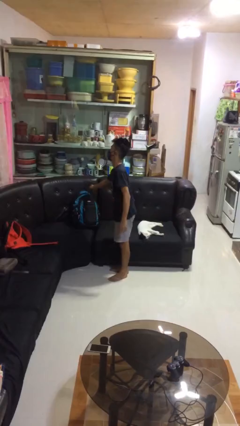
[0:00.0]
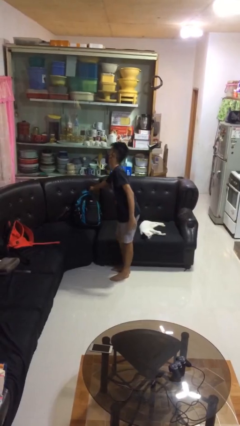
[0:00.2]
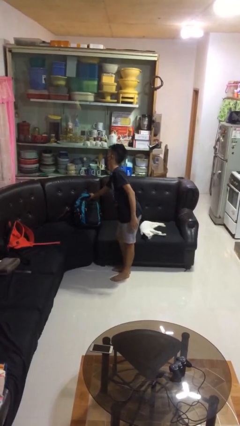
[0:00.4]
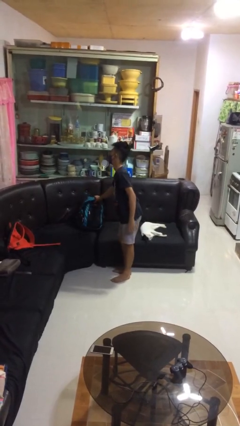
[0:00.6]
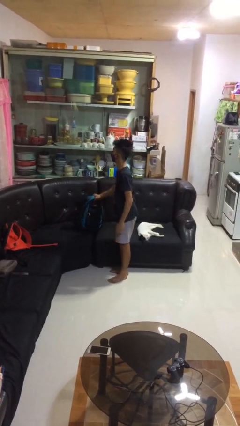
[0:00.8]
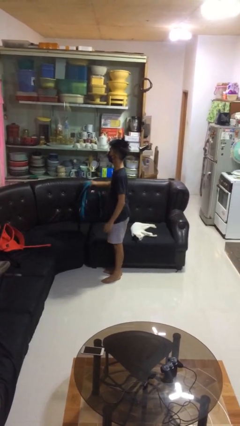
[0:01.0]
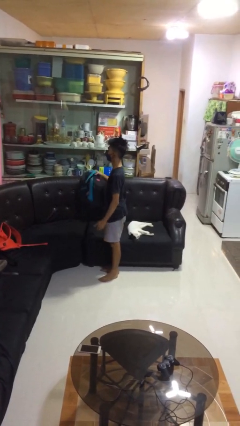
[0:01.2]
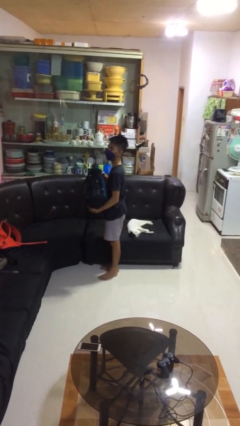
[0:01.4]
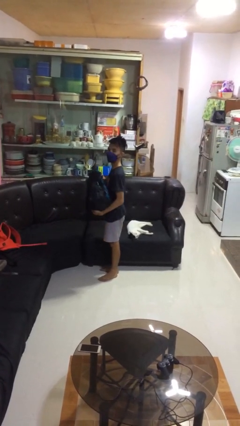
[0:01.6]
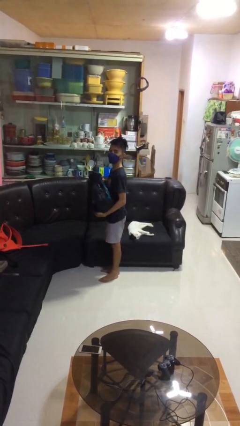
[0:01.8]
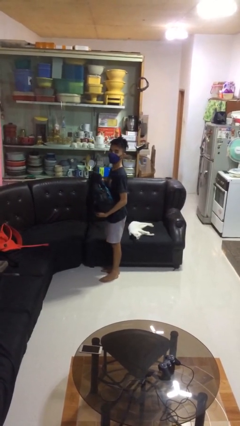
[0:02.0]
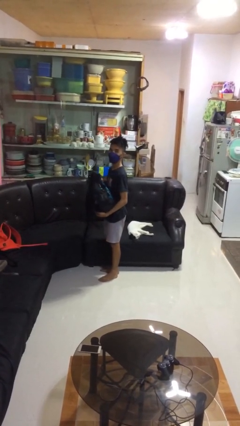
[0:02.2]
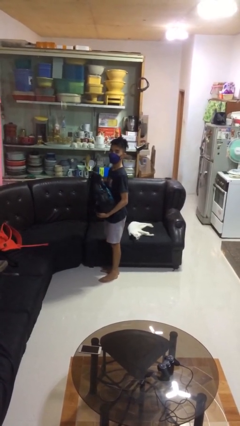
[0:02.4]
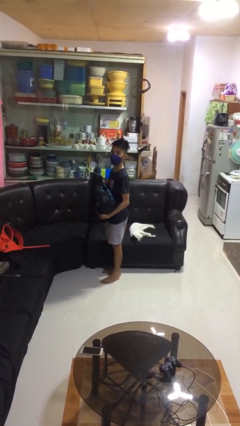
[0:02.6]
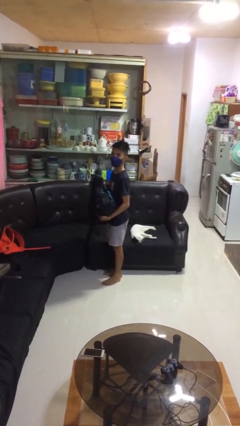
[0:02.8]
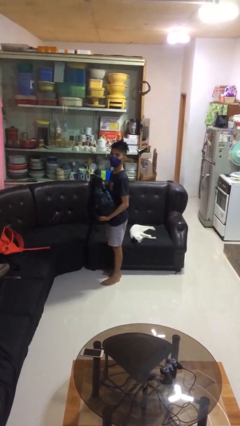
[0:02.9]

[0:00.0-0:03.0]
person picks up object from couch

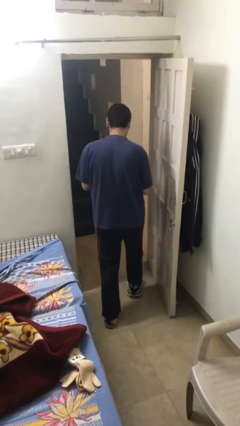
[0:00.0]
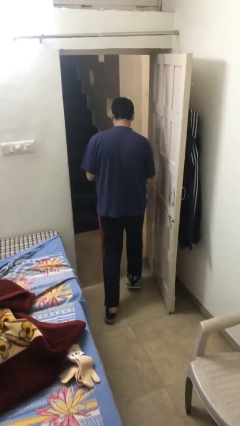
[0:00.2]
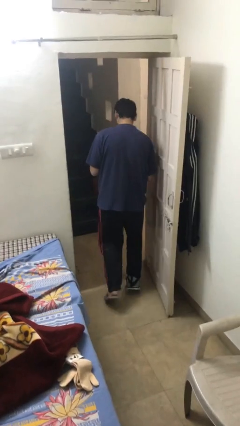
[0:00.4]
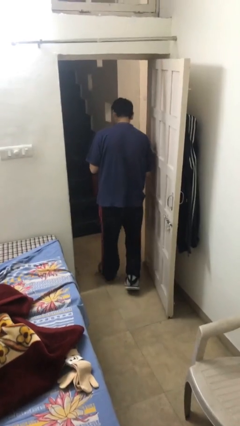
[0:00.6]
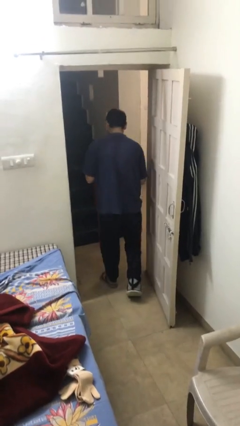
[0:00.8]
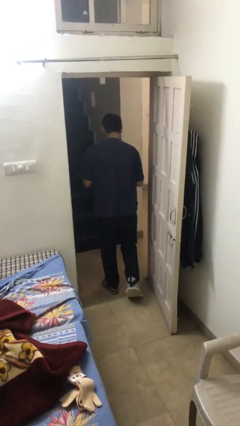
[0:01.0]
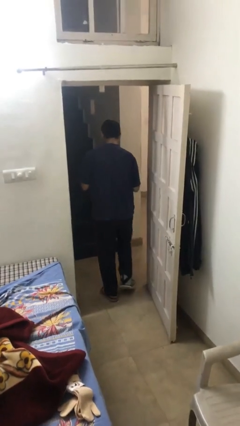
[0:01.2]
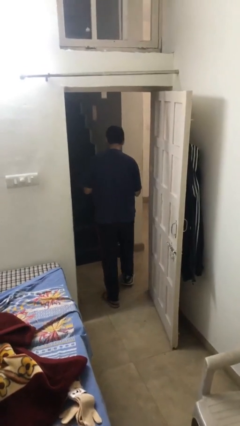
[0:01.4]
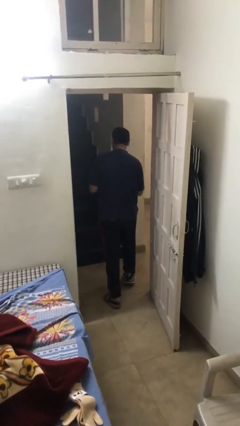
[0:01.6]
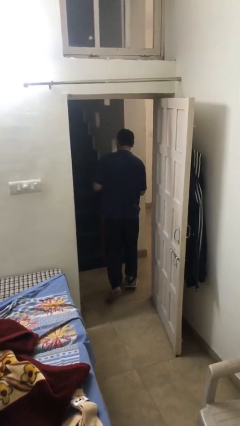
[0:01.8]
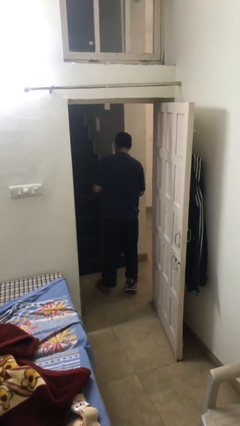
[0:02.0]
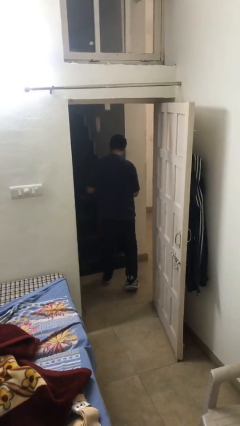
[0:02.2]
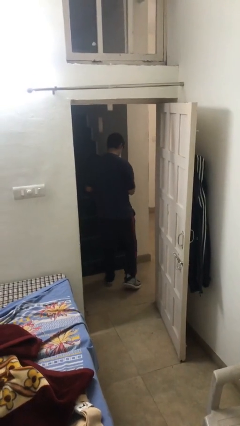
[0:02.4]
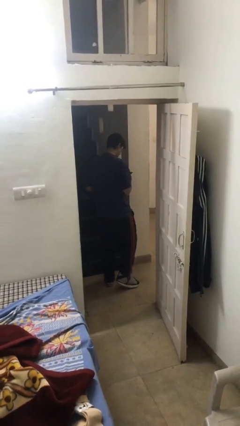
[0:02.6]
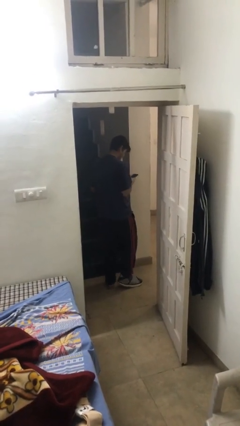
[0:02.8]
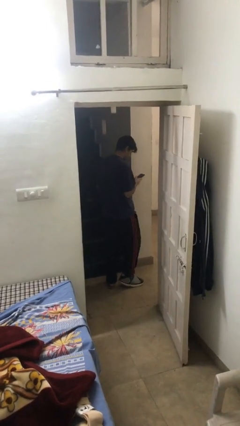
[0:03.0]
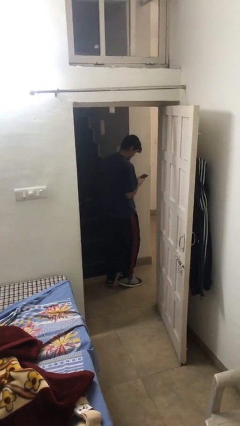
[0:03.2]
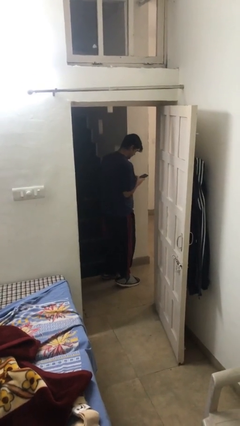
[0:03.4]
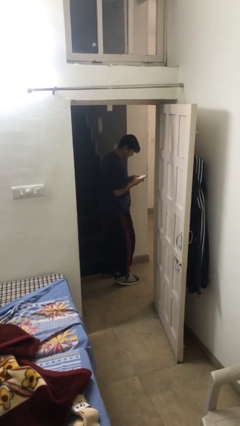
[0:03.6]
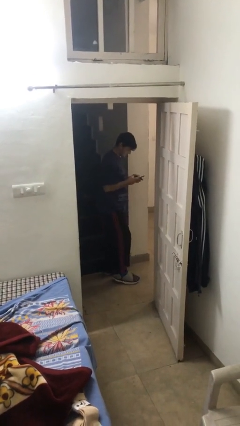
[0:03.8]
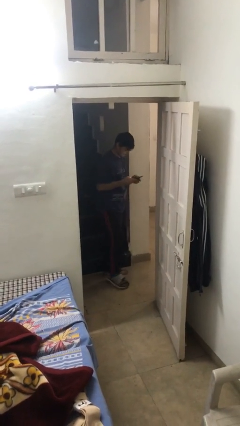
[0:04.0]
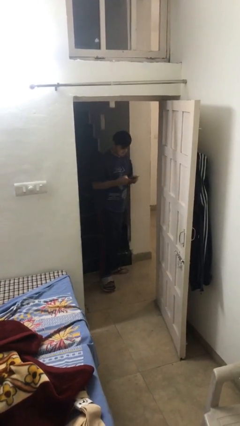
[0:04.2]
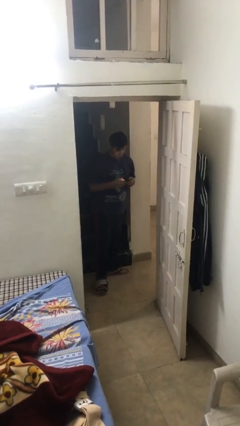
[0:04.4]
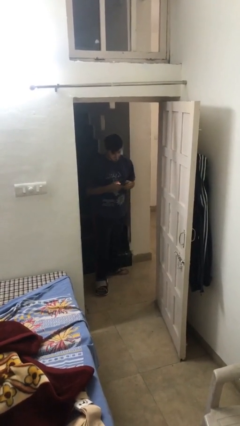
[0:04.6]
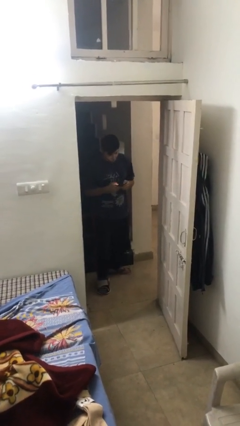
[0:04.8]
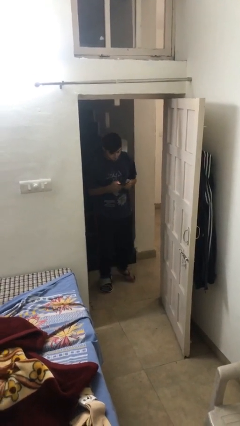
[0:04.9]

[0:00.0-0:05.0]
person exits scene through structure

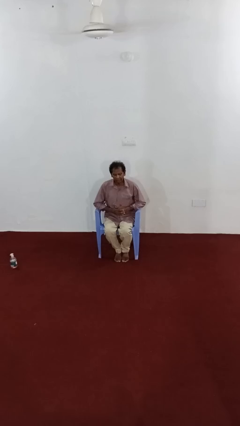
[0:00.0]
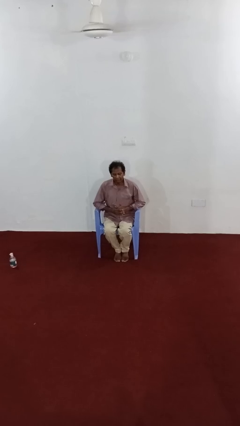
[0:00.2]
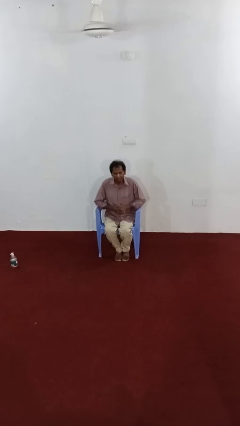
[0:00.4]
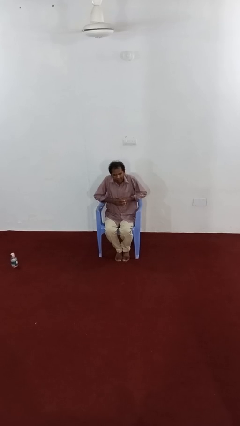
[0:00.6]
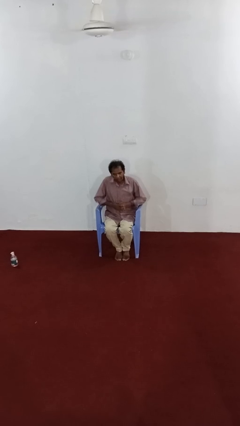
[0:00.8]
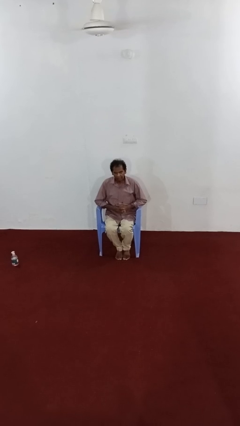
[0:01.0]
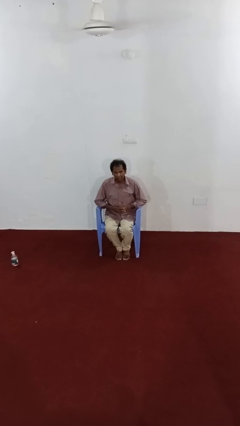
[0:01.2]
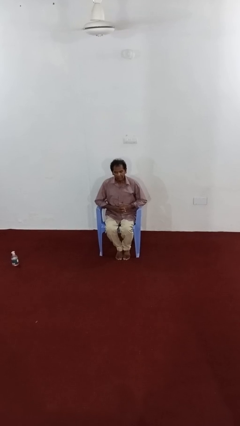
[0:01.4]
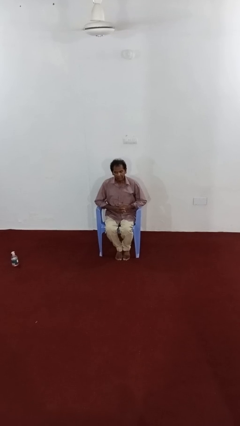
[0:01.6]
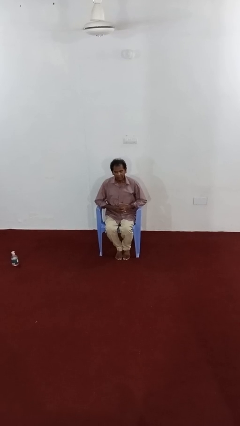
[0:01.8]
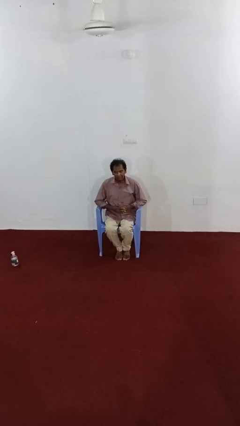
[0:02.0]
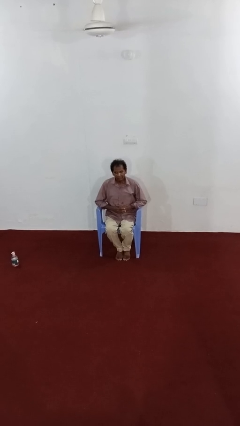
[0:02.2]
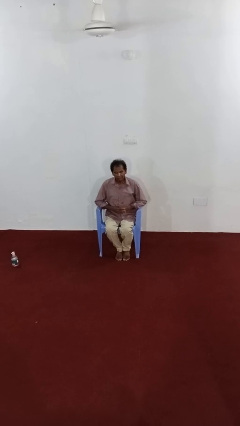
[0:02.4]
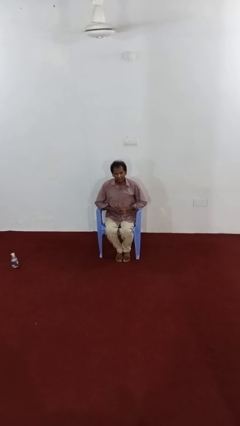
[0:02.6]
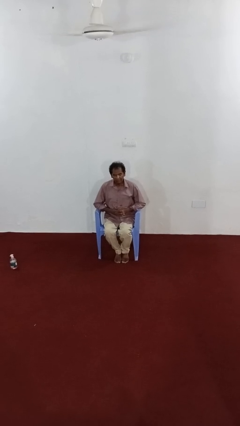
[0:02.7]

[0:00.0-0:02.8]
person shrugs

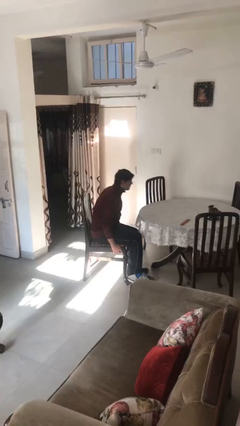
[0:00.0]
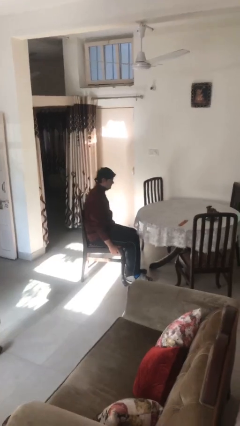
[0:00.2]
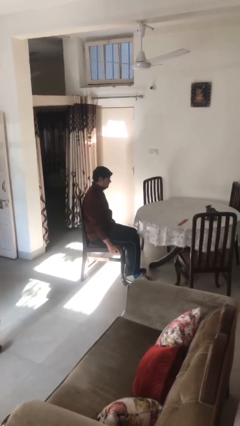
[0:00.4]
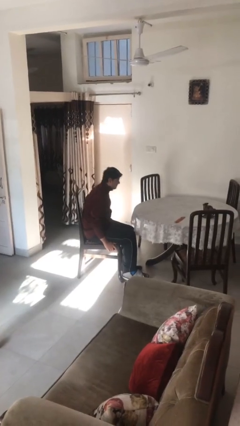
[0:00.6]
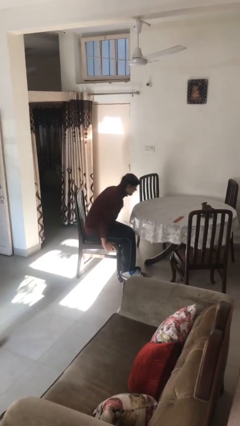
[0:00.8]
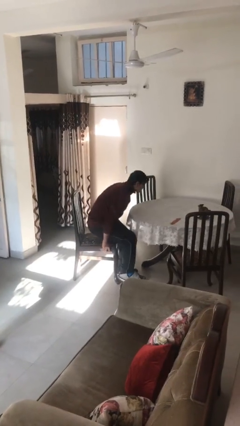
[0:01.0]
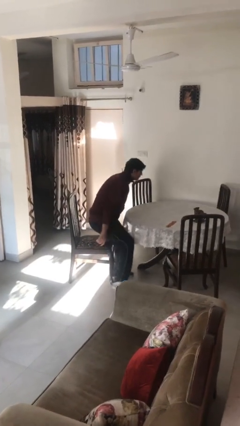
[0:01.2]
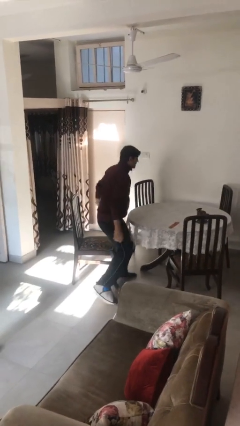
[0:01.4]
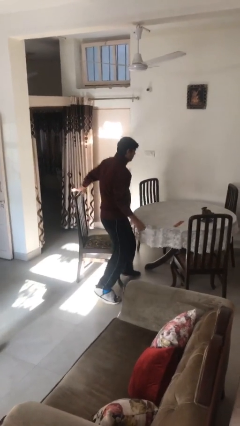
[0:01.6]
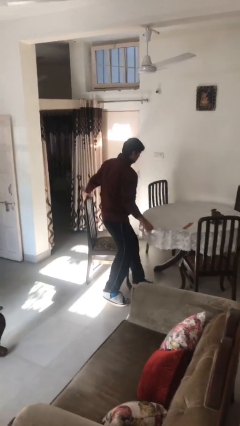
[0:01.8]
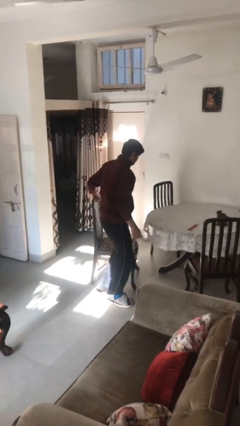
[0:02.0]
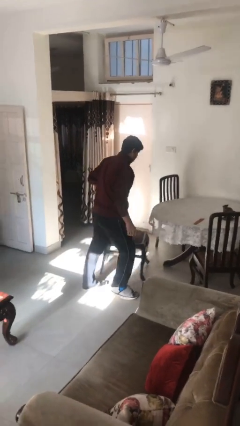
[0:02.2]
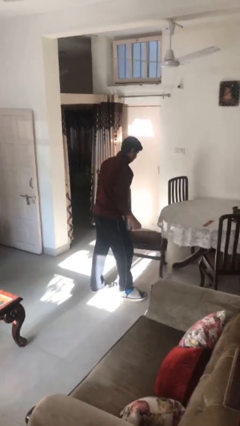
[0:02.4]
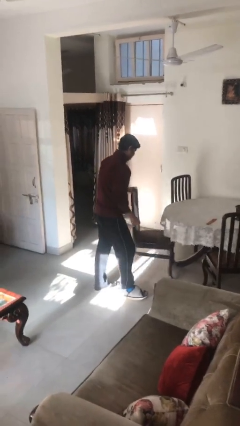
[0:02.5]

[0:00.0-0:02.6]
person stands up

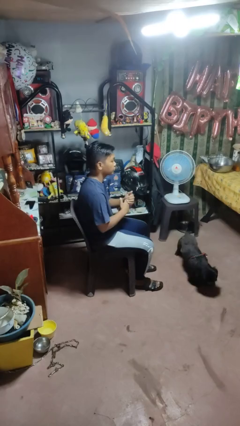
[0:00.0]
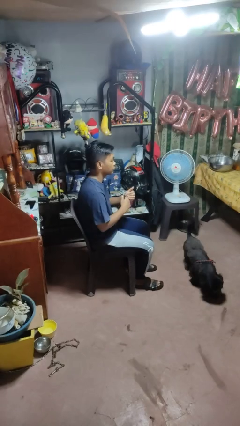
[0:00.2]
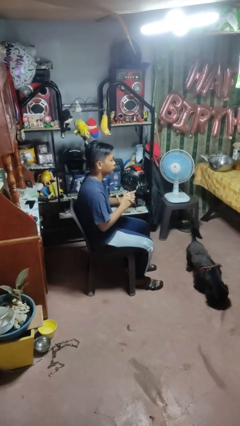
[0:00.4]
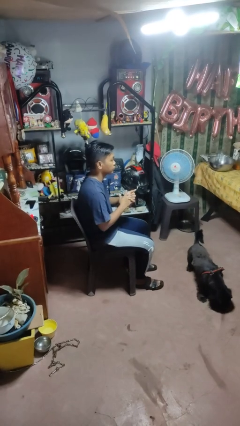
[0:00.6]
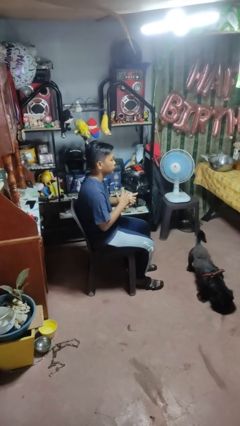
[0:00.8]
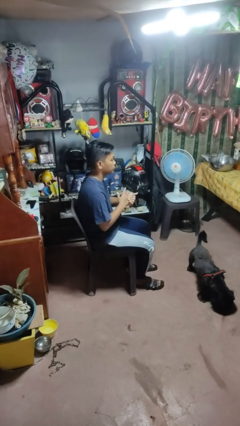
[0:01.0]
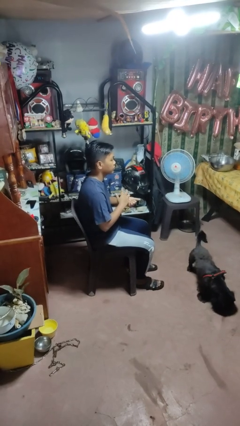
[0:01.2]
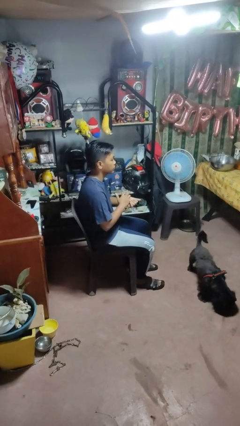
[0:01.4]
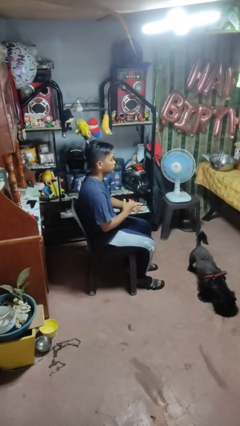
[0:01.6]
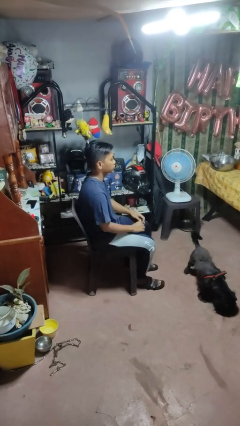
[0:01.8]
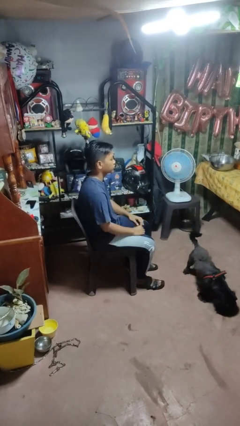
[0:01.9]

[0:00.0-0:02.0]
person cracks knuckles

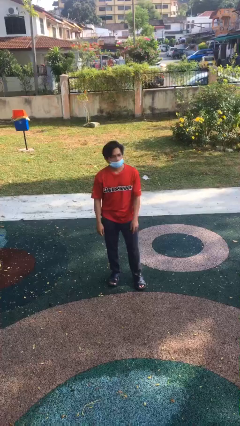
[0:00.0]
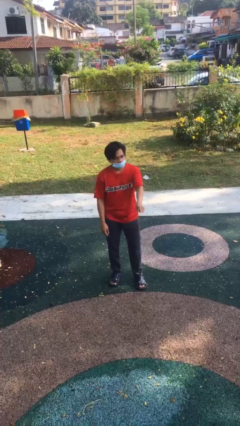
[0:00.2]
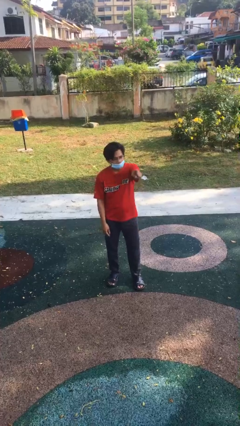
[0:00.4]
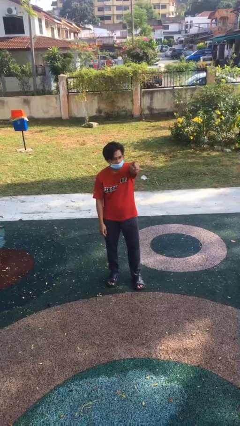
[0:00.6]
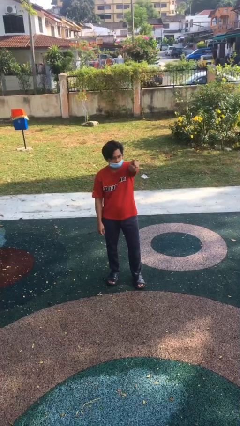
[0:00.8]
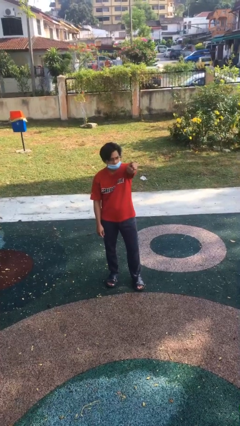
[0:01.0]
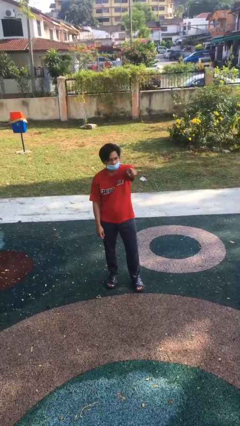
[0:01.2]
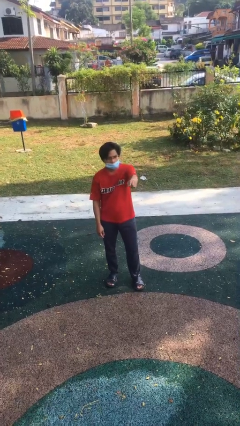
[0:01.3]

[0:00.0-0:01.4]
person points at person

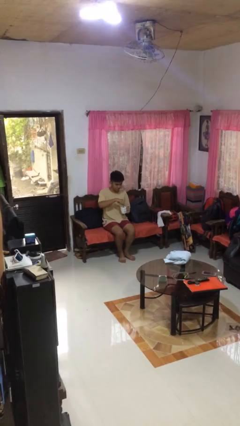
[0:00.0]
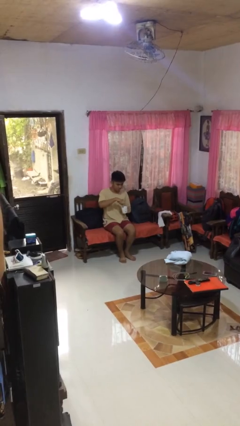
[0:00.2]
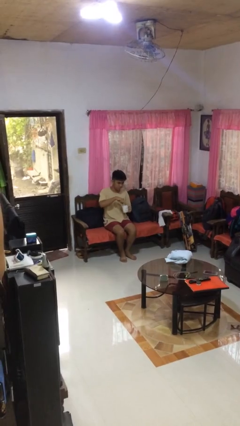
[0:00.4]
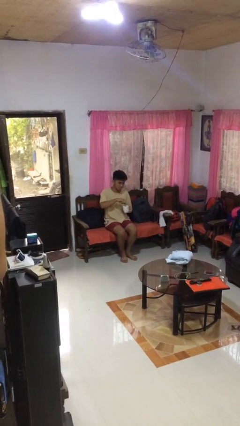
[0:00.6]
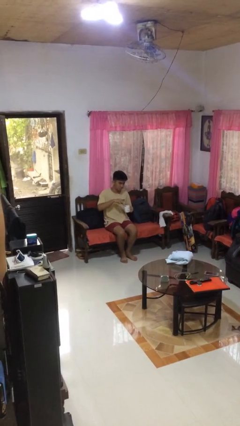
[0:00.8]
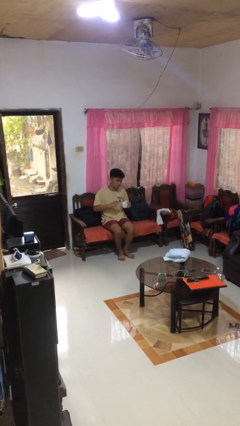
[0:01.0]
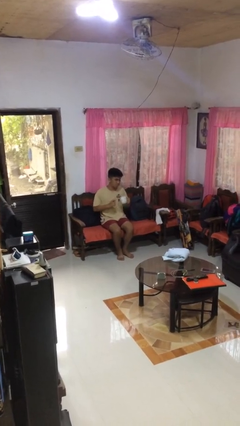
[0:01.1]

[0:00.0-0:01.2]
person stirs mug
